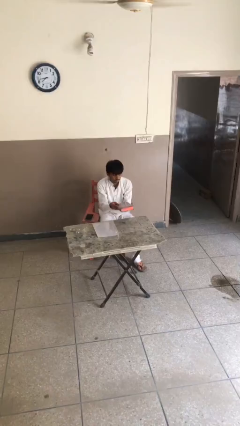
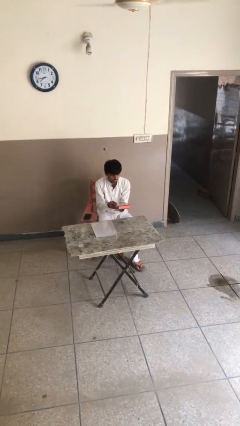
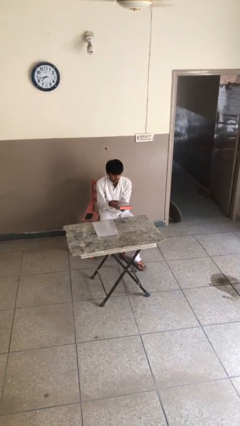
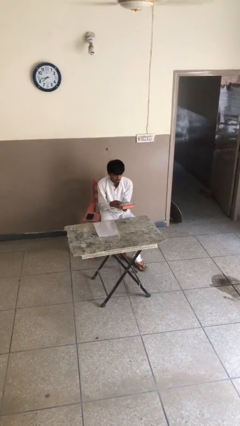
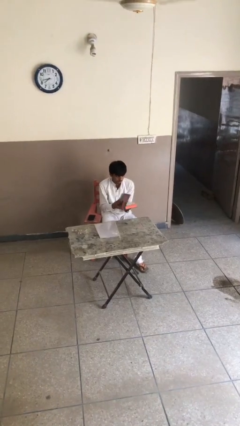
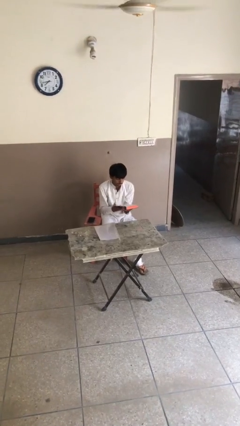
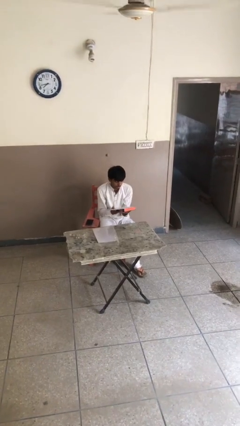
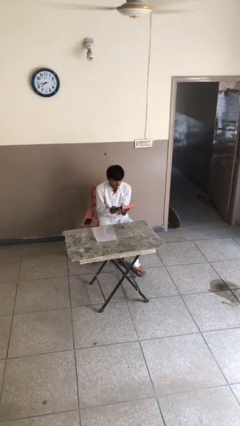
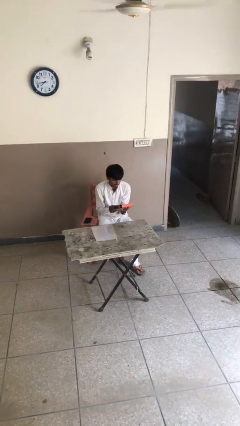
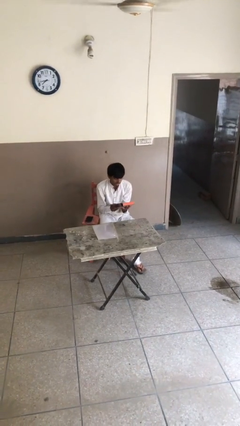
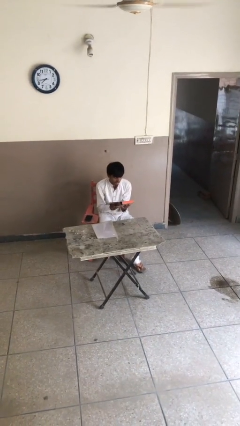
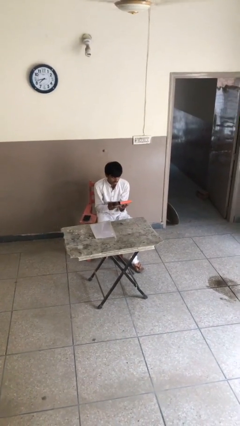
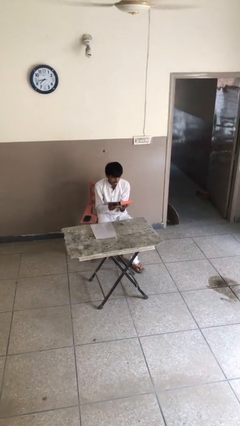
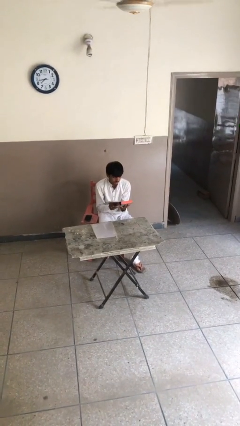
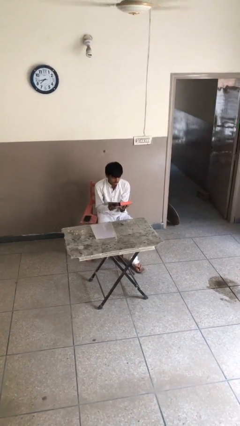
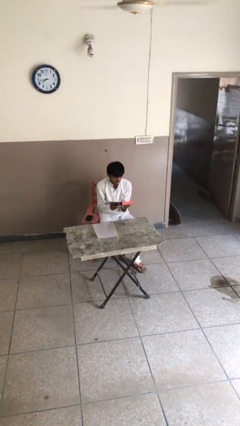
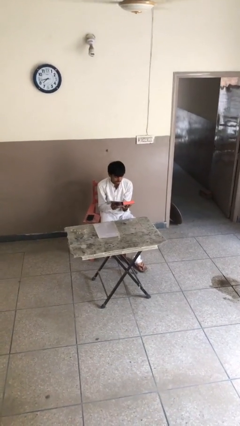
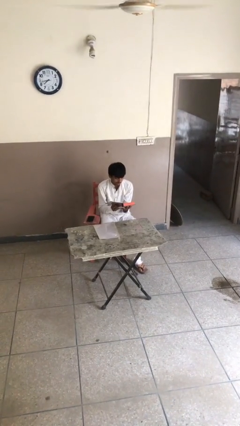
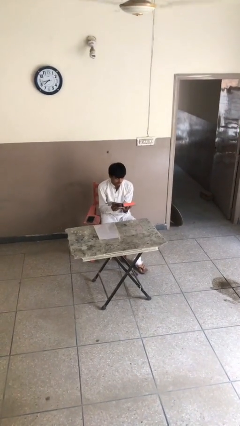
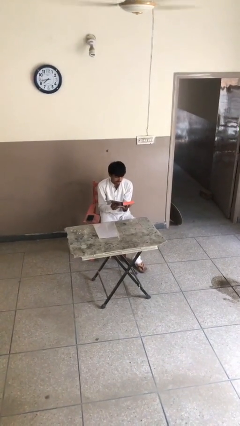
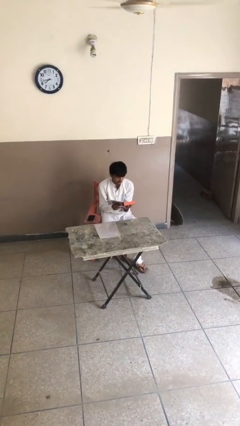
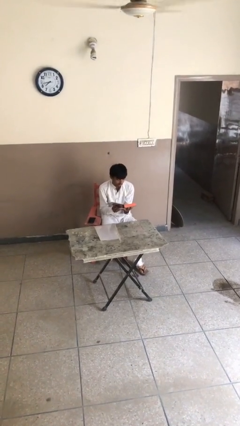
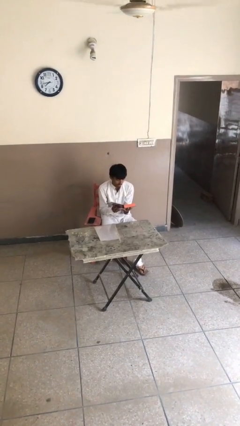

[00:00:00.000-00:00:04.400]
person reads document

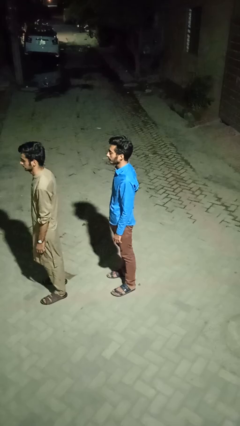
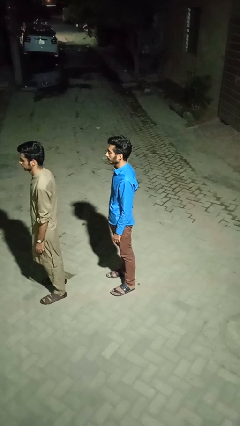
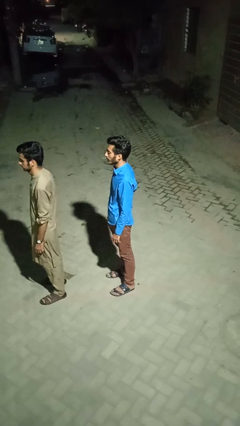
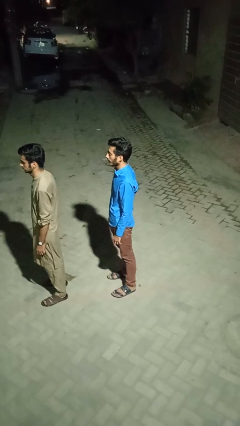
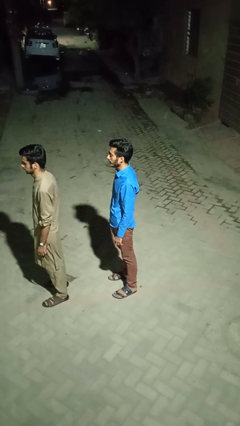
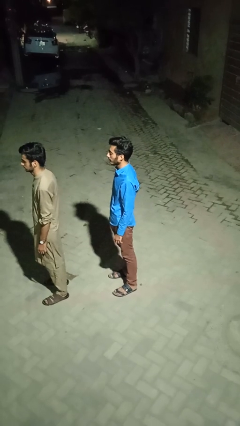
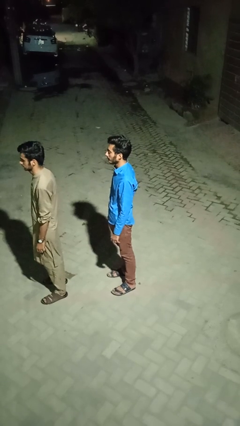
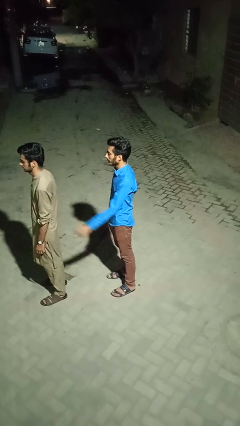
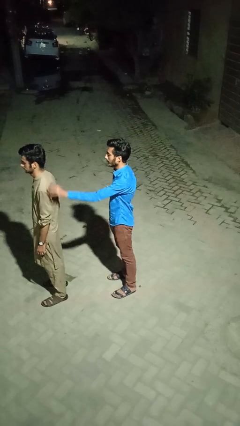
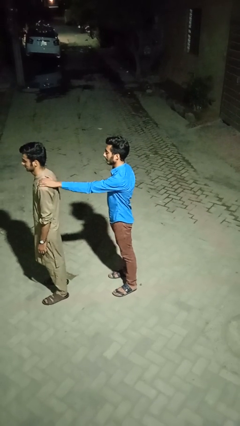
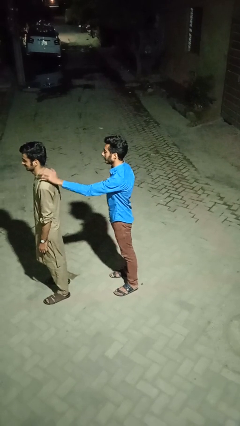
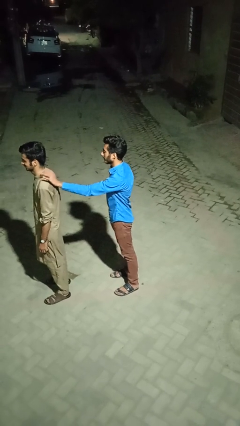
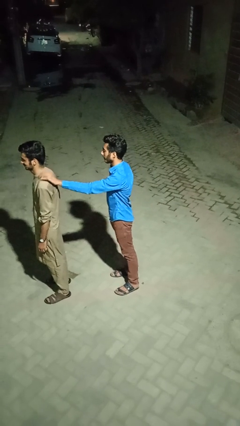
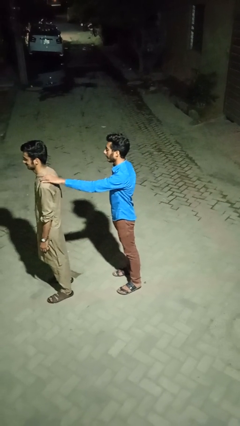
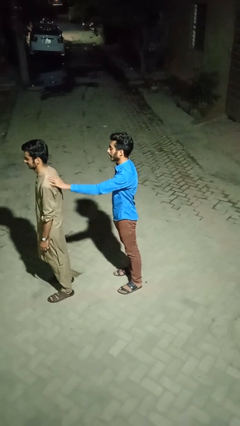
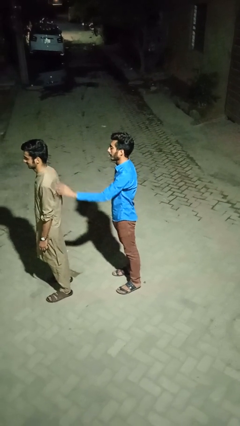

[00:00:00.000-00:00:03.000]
person touches back of person

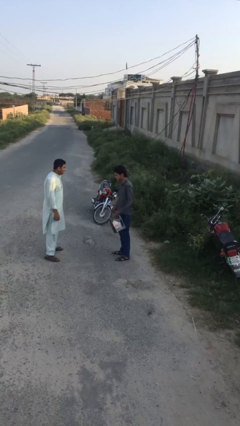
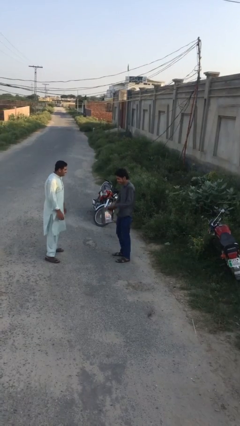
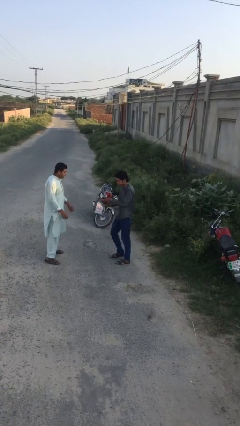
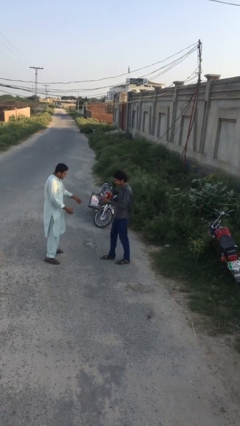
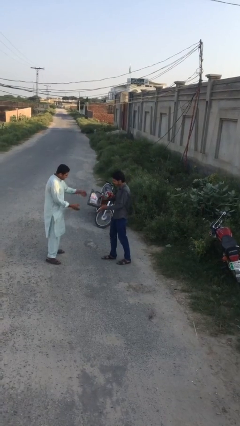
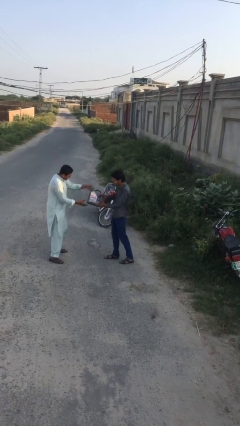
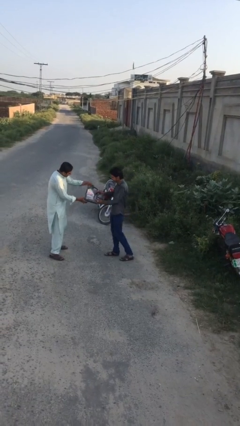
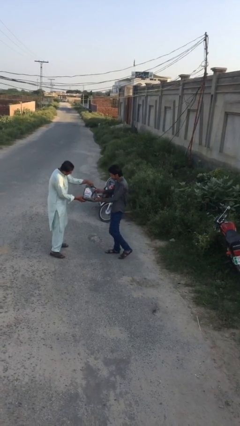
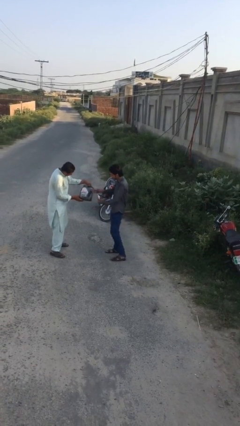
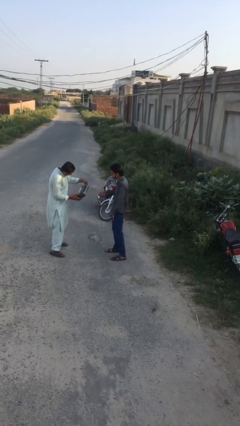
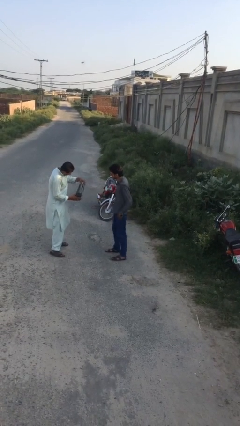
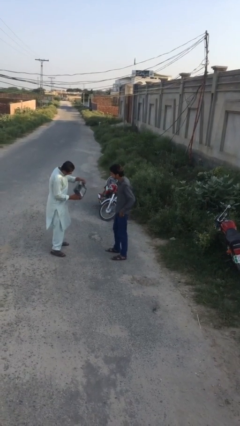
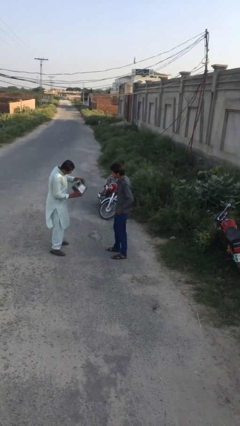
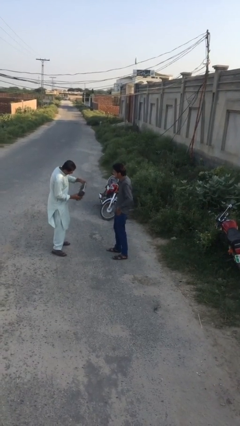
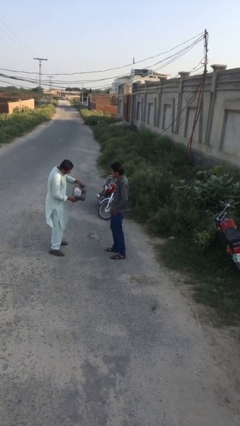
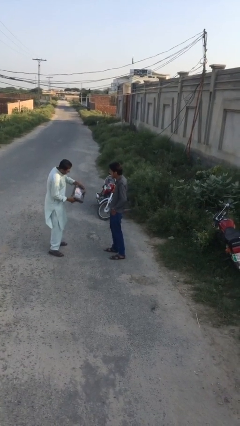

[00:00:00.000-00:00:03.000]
person transfers object to person

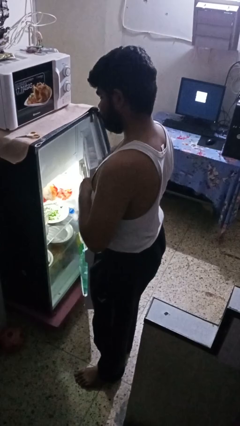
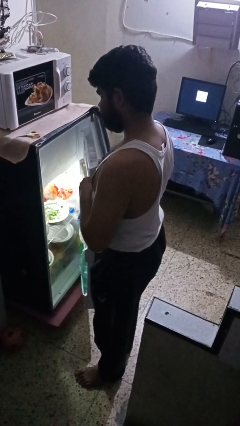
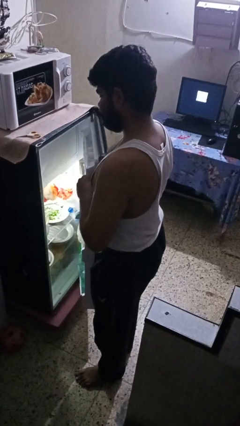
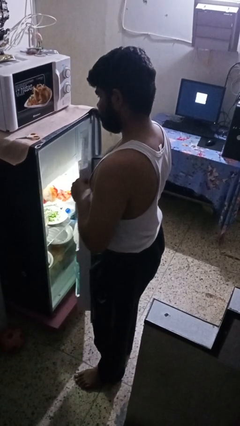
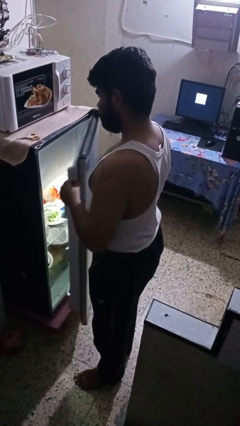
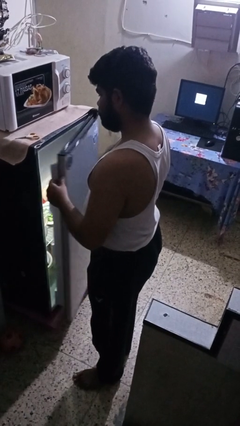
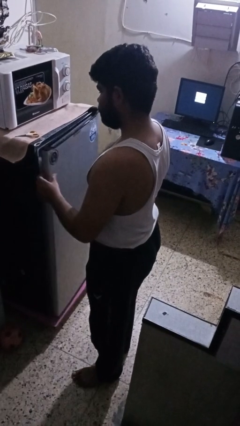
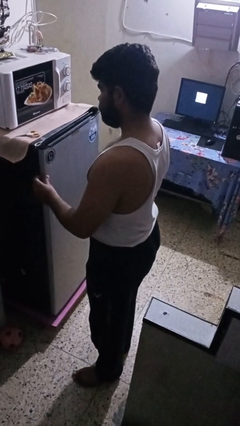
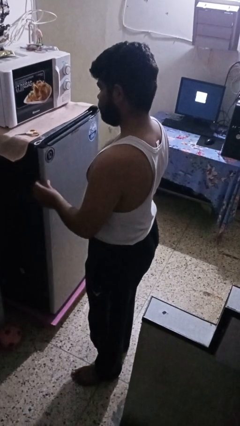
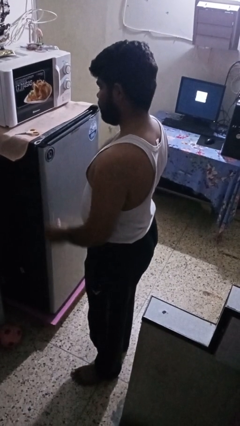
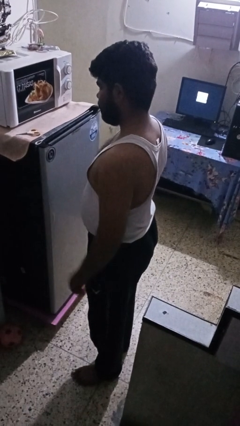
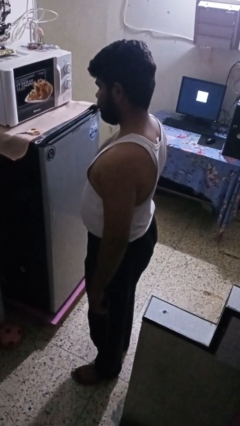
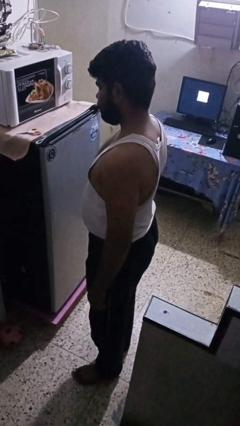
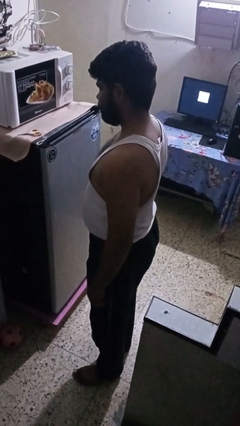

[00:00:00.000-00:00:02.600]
person closes refrigerator

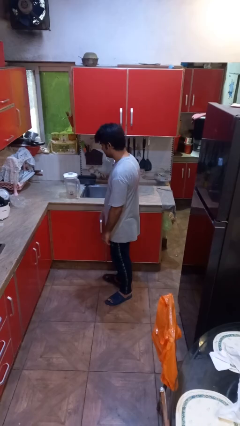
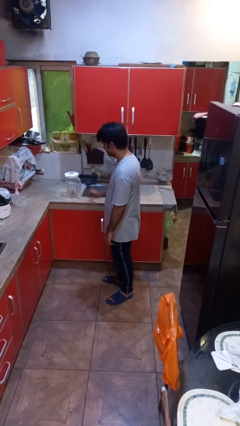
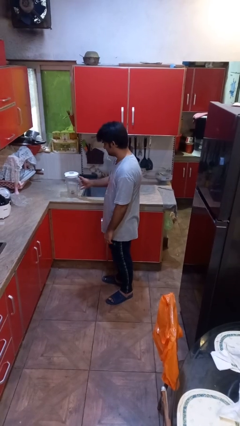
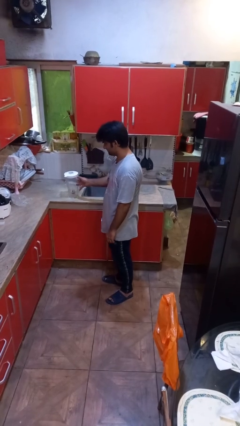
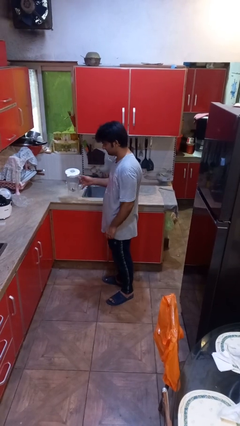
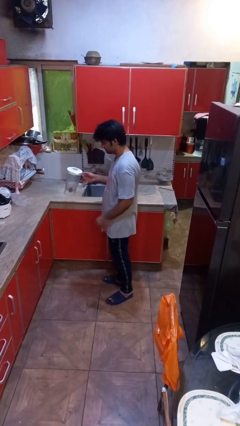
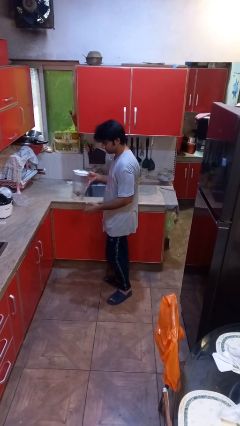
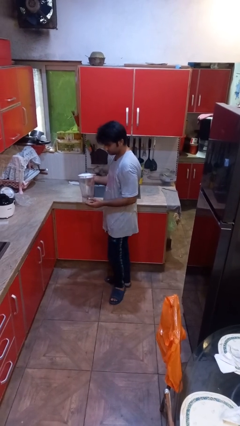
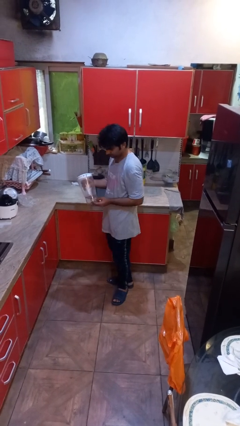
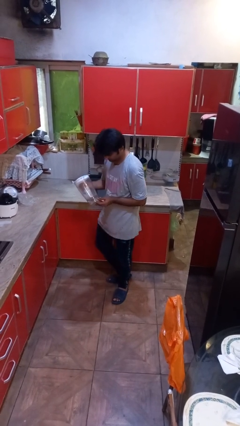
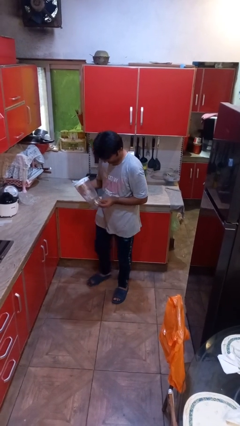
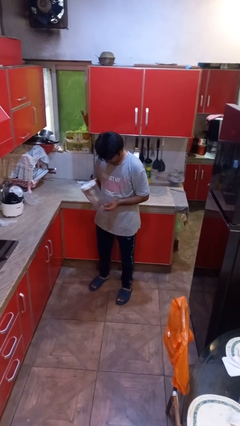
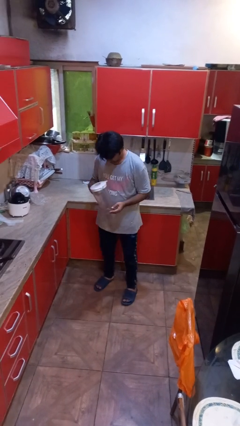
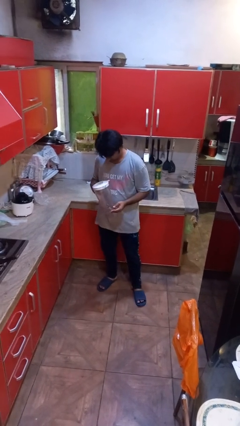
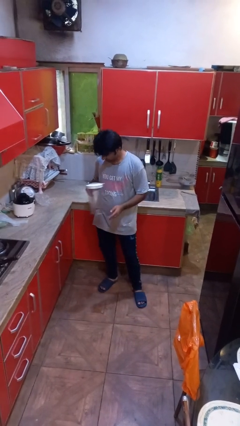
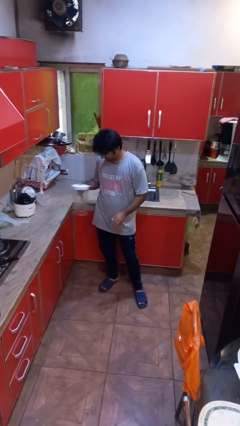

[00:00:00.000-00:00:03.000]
person picks up object from countertop

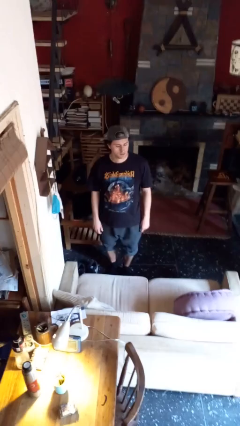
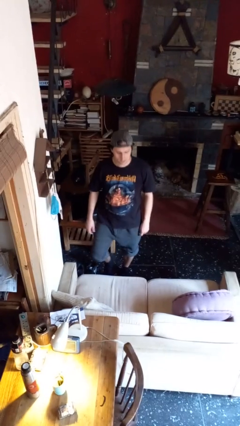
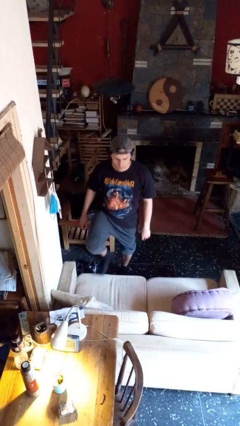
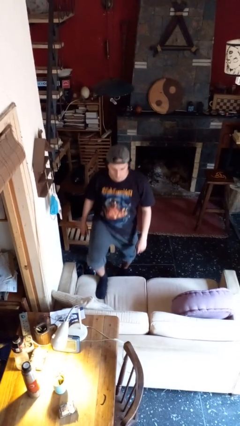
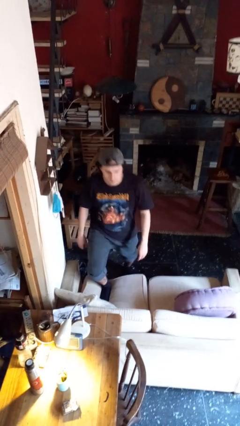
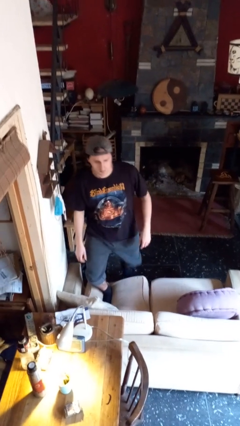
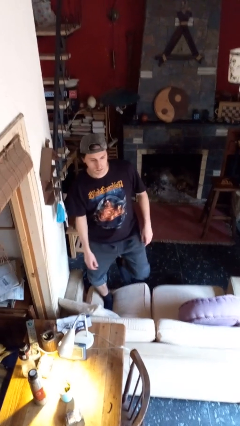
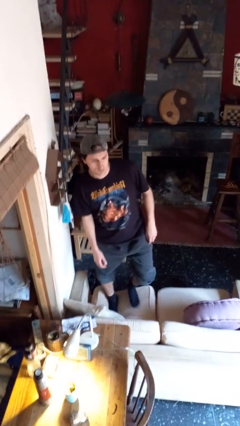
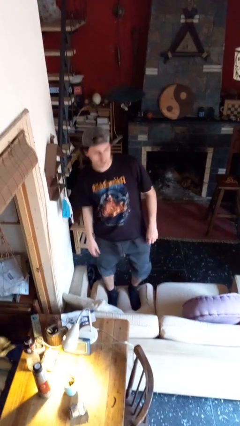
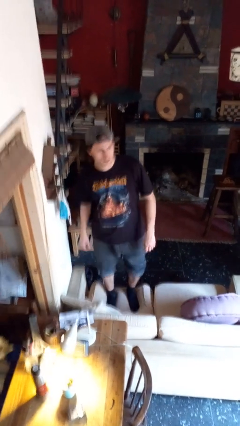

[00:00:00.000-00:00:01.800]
person climbs on couch
